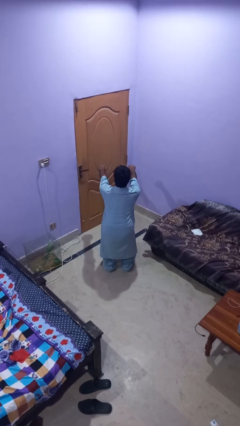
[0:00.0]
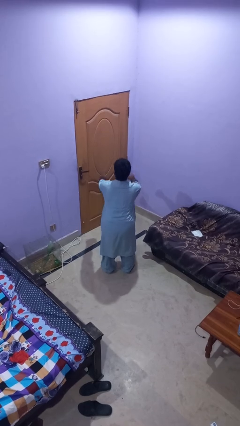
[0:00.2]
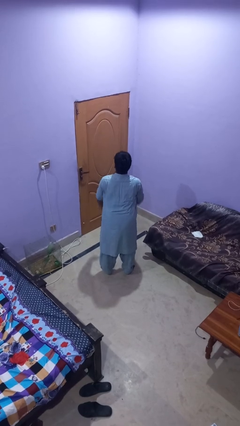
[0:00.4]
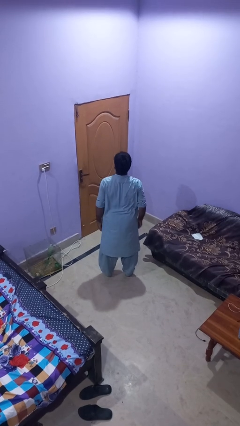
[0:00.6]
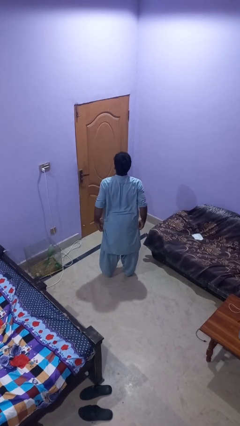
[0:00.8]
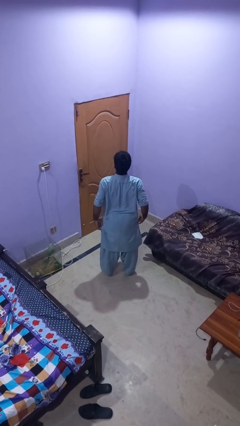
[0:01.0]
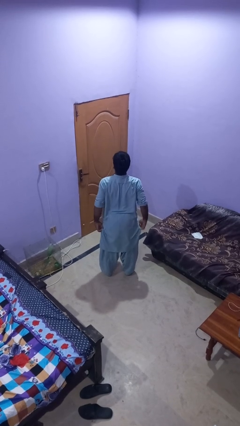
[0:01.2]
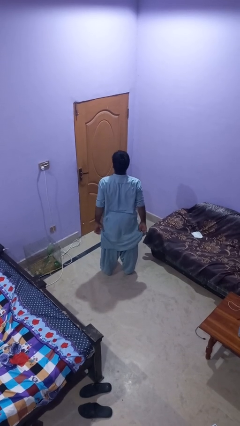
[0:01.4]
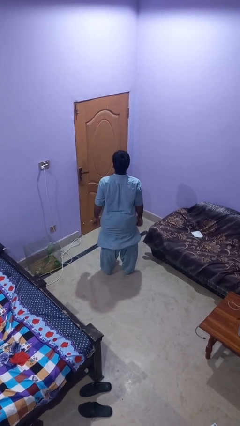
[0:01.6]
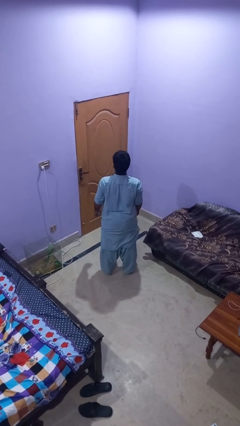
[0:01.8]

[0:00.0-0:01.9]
person stands up

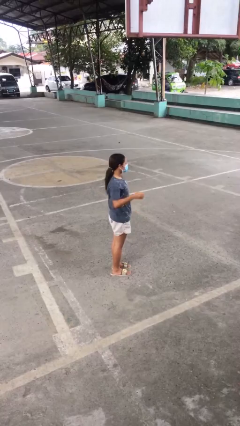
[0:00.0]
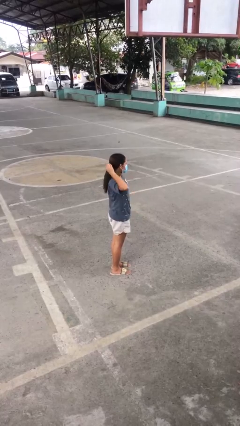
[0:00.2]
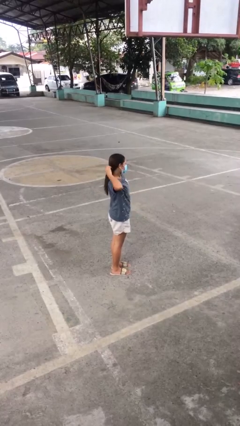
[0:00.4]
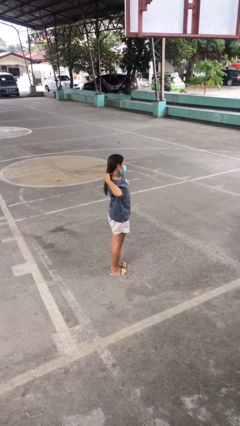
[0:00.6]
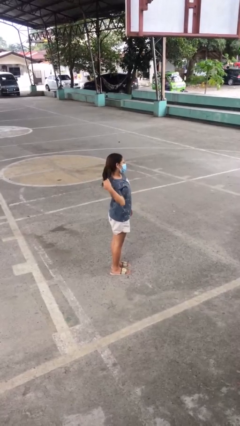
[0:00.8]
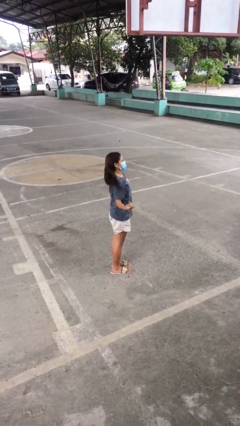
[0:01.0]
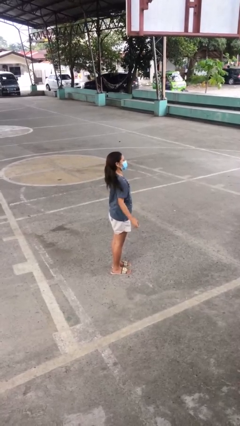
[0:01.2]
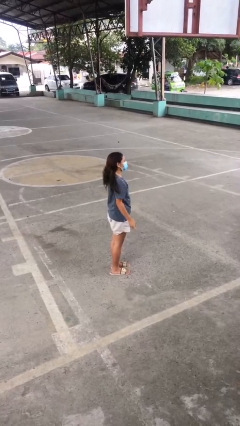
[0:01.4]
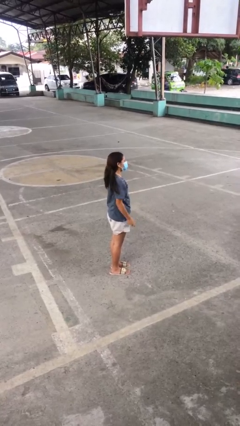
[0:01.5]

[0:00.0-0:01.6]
person takes off hairtie

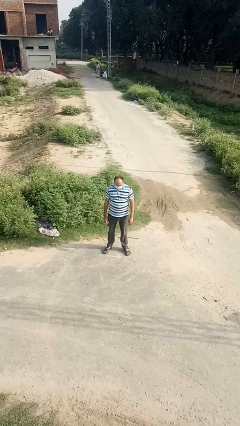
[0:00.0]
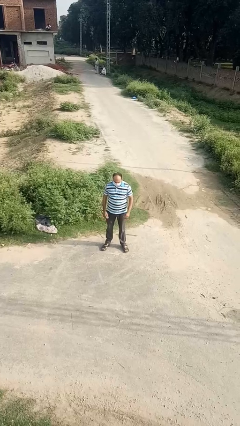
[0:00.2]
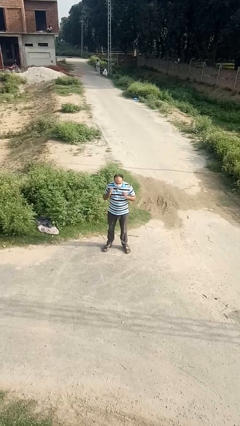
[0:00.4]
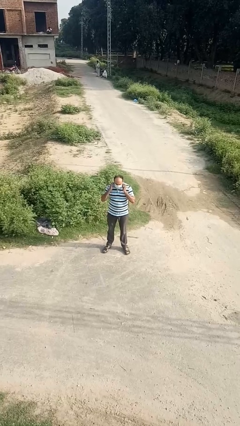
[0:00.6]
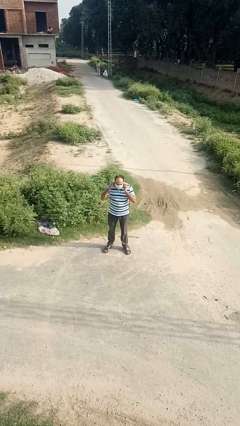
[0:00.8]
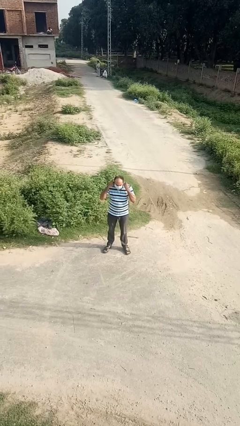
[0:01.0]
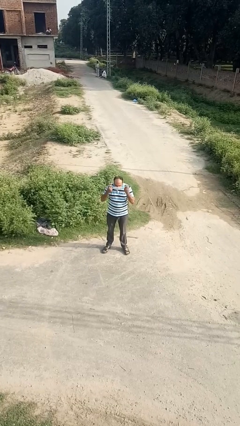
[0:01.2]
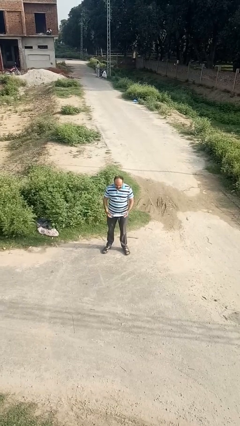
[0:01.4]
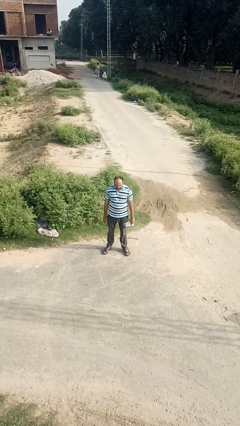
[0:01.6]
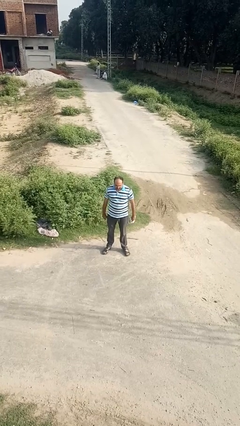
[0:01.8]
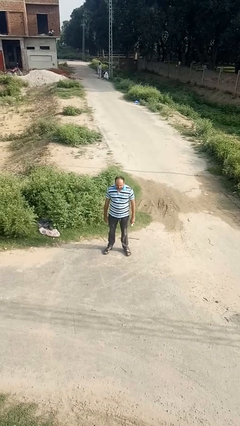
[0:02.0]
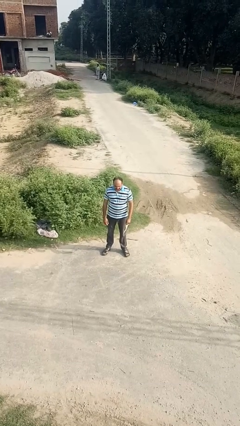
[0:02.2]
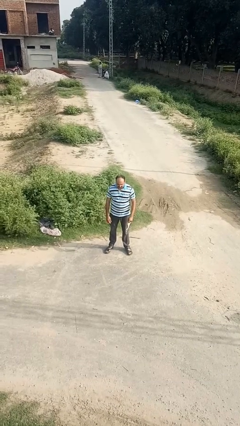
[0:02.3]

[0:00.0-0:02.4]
person takes off facemask

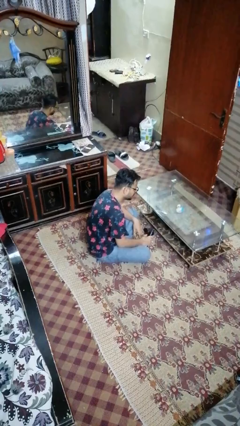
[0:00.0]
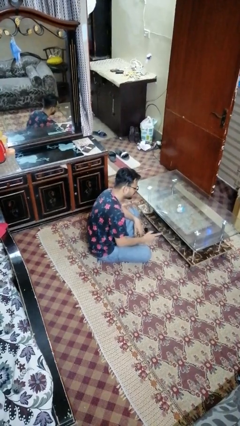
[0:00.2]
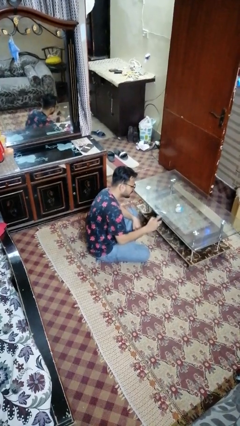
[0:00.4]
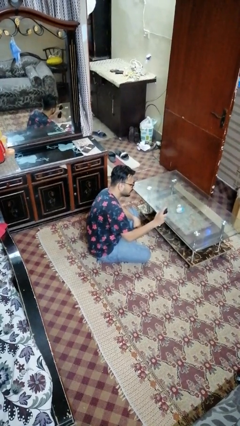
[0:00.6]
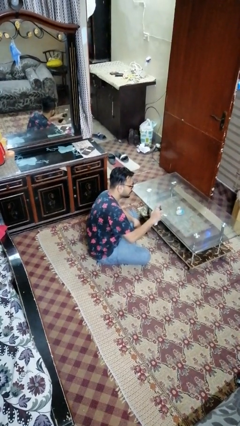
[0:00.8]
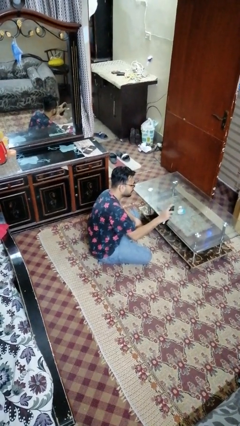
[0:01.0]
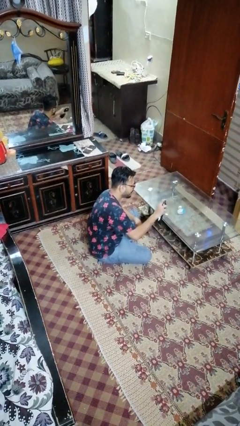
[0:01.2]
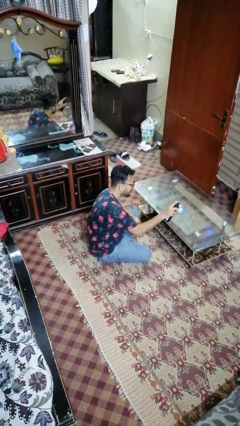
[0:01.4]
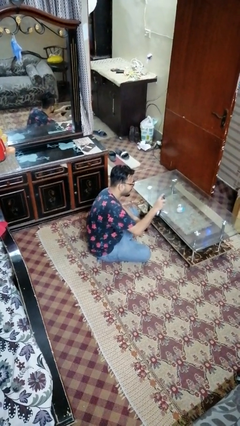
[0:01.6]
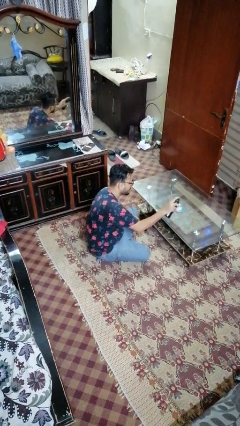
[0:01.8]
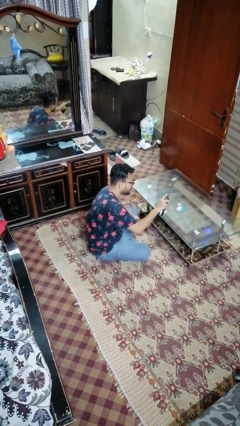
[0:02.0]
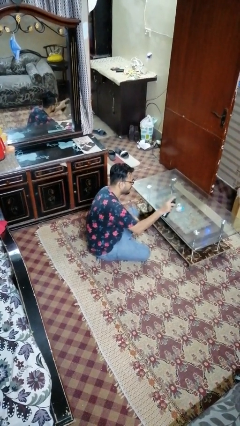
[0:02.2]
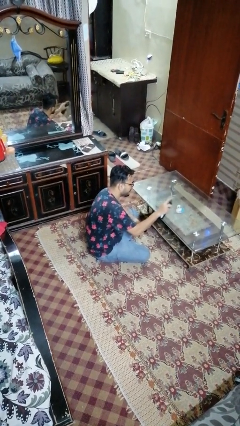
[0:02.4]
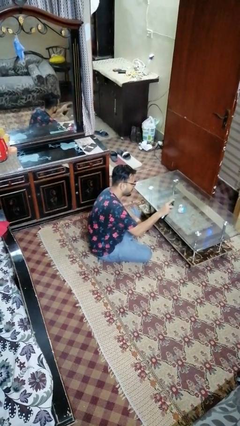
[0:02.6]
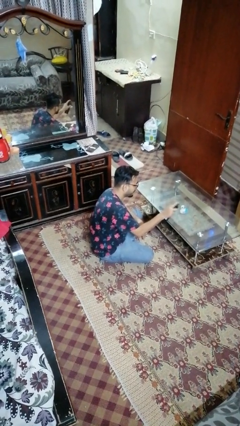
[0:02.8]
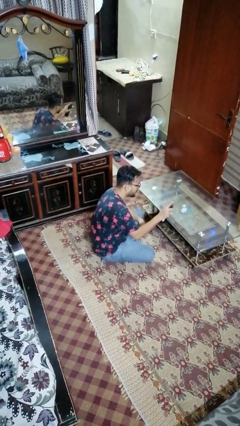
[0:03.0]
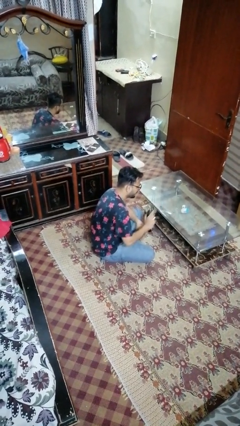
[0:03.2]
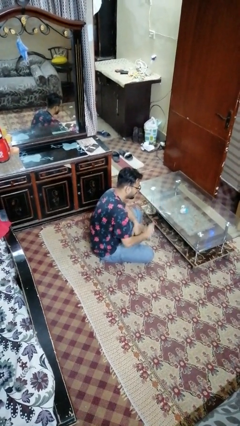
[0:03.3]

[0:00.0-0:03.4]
person sprays from bottle

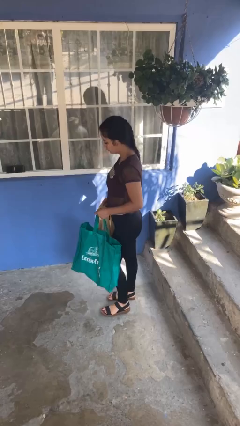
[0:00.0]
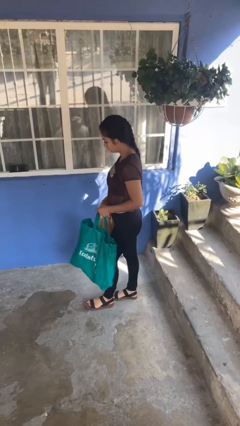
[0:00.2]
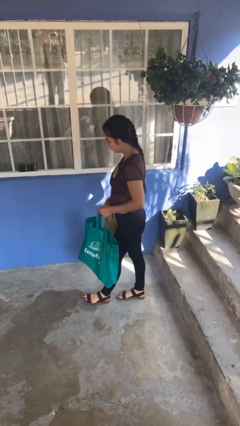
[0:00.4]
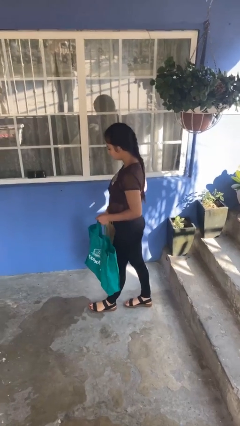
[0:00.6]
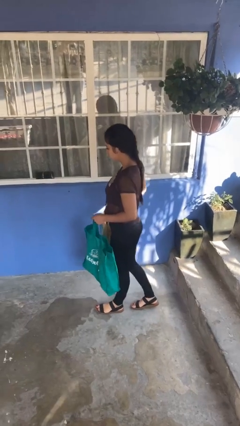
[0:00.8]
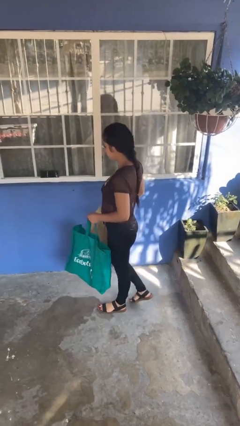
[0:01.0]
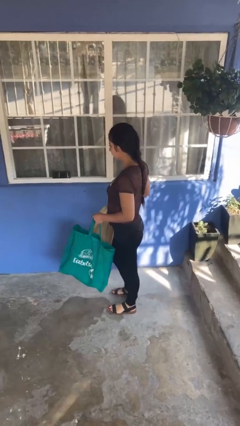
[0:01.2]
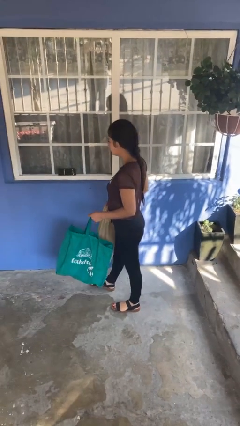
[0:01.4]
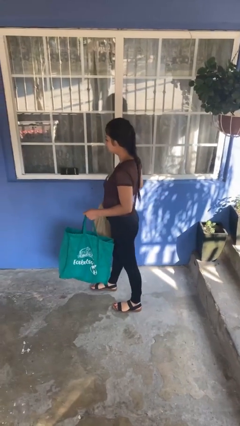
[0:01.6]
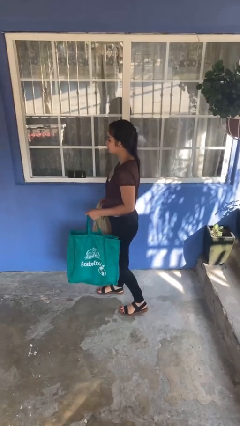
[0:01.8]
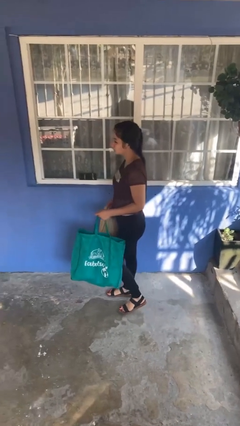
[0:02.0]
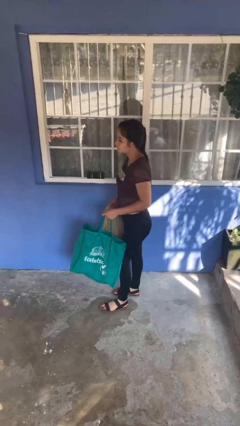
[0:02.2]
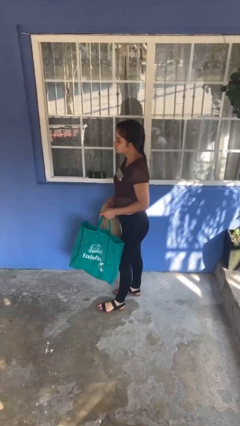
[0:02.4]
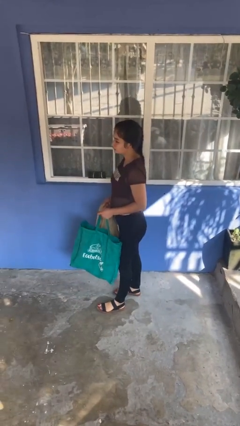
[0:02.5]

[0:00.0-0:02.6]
person carries groceries

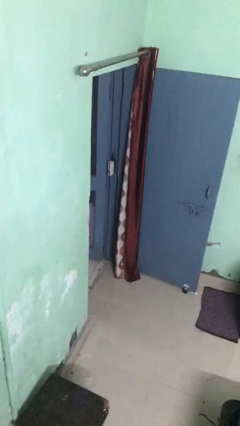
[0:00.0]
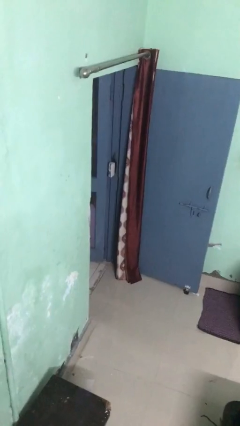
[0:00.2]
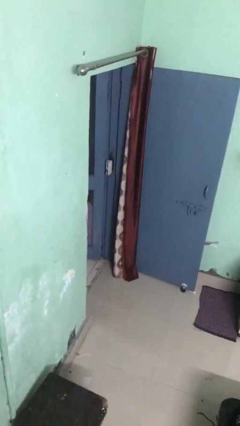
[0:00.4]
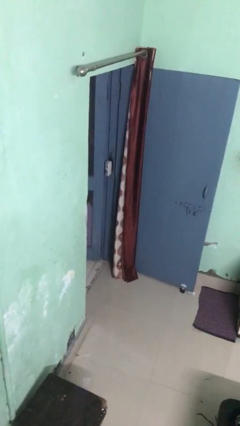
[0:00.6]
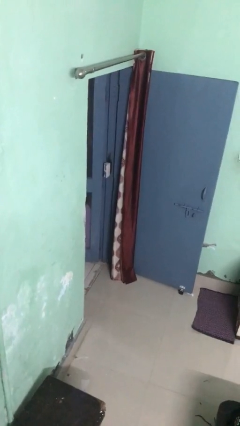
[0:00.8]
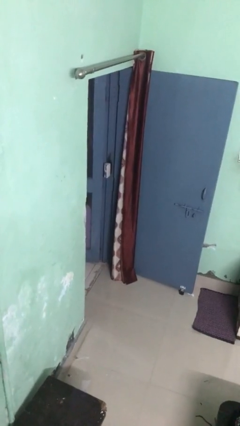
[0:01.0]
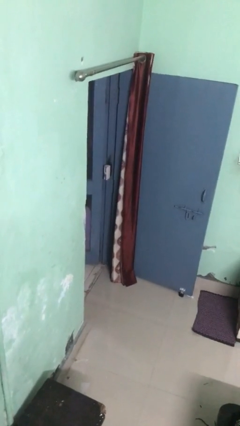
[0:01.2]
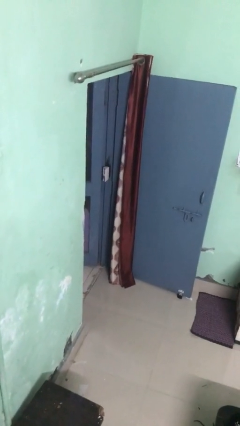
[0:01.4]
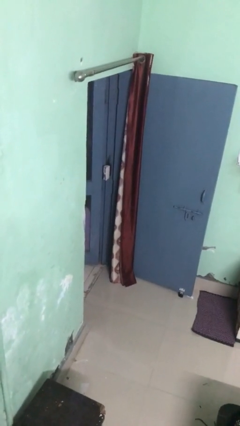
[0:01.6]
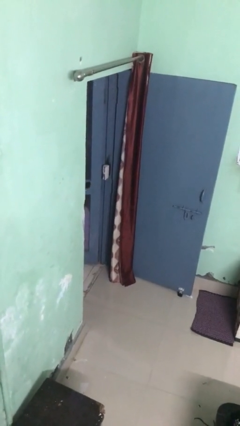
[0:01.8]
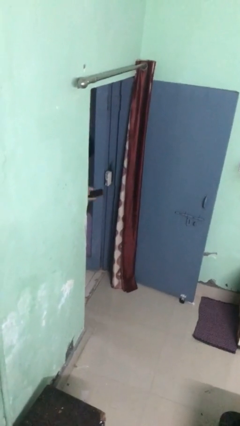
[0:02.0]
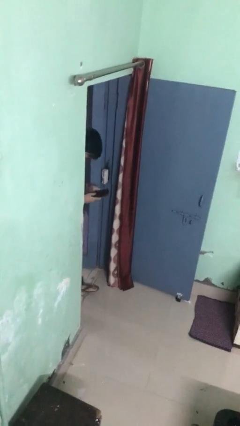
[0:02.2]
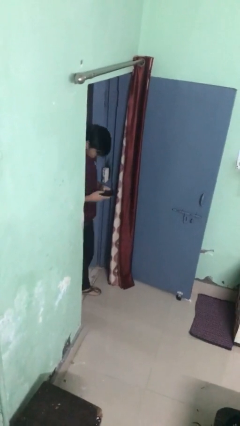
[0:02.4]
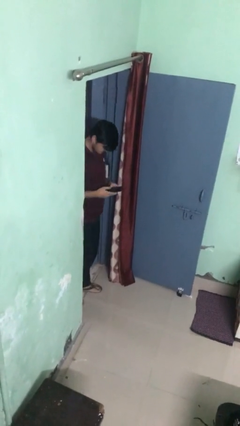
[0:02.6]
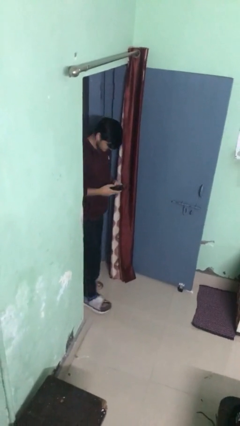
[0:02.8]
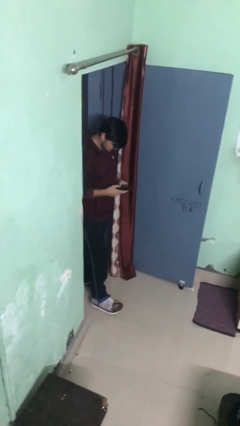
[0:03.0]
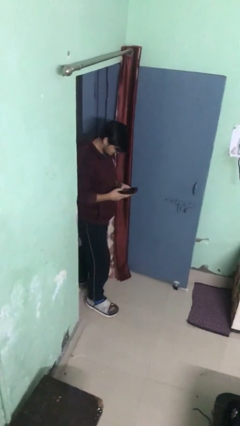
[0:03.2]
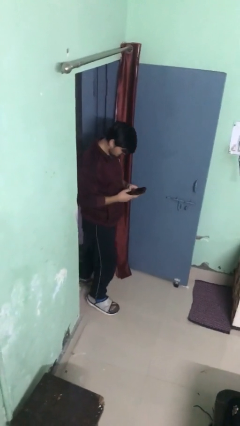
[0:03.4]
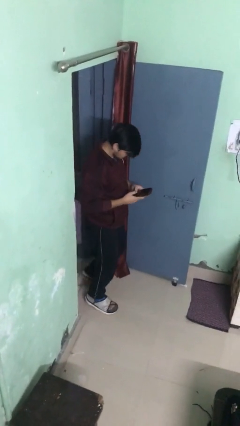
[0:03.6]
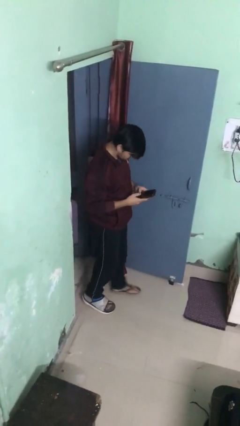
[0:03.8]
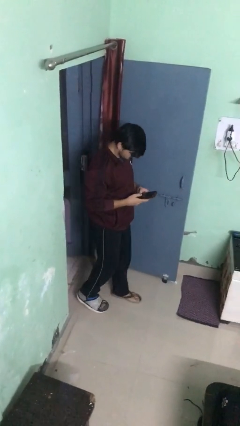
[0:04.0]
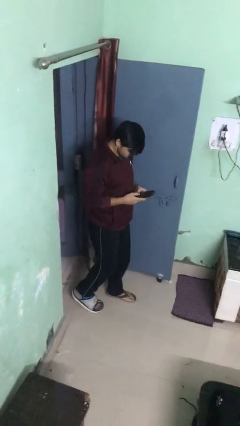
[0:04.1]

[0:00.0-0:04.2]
person enters scene through structure

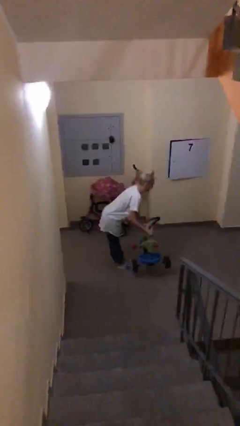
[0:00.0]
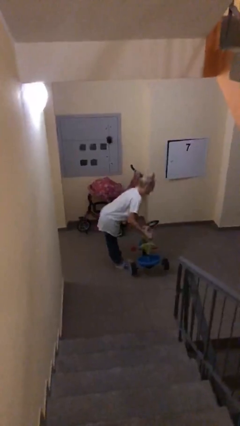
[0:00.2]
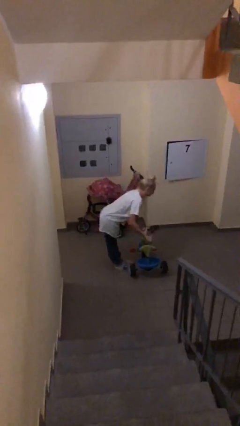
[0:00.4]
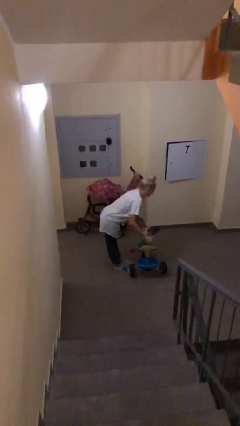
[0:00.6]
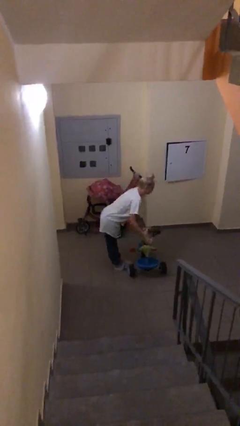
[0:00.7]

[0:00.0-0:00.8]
person puts down object on floor

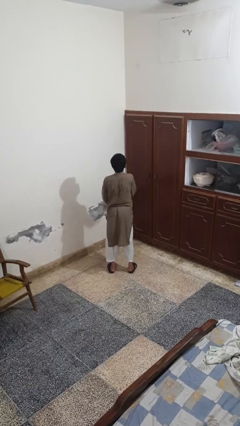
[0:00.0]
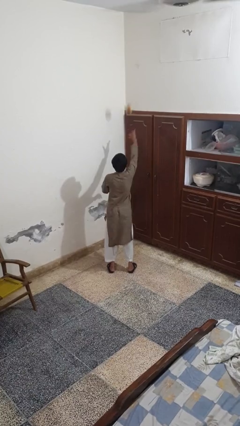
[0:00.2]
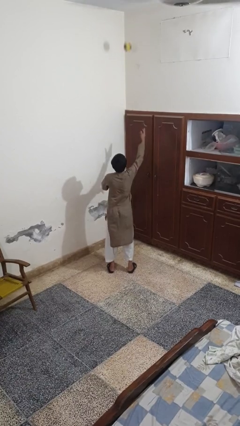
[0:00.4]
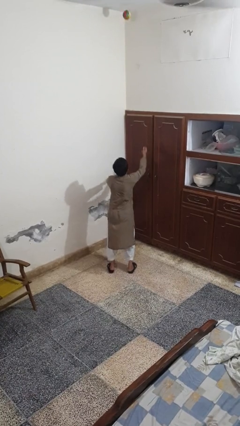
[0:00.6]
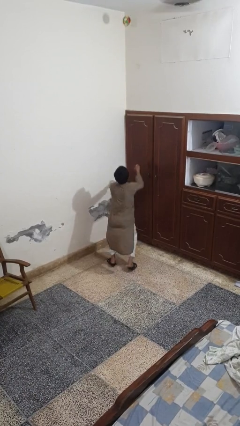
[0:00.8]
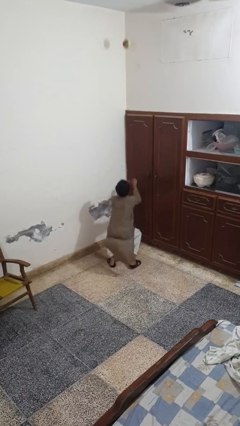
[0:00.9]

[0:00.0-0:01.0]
person drops object
